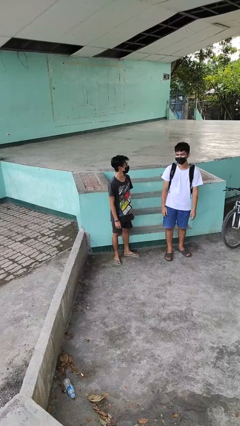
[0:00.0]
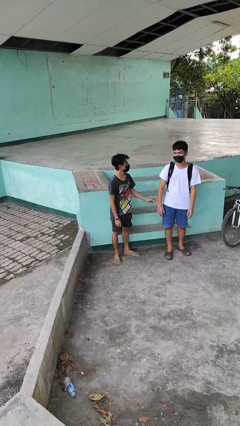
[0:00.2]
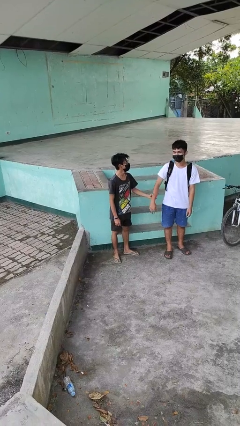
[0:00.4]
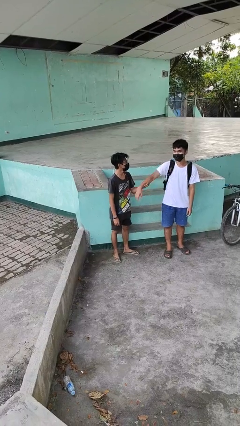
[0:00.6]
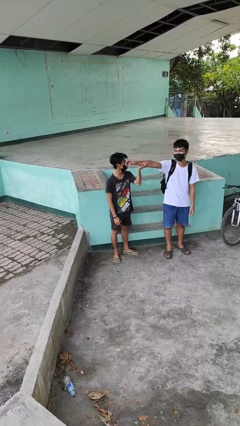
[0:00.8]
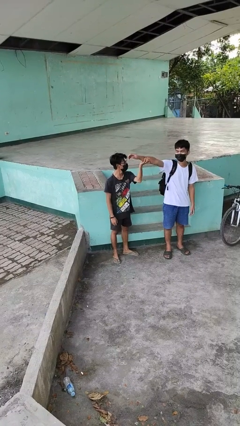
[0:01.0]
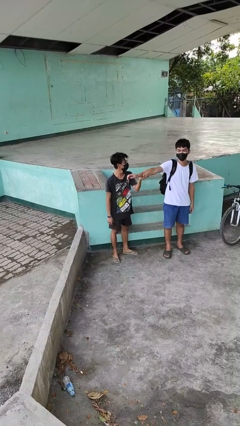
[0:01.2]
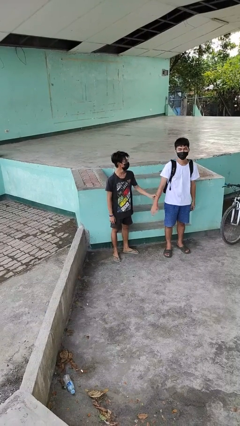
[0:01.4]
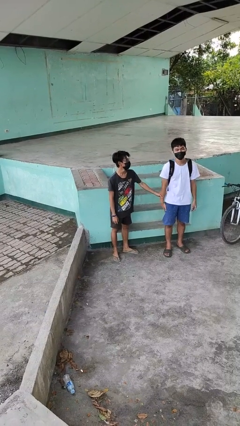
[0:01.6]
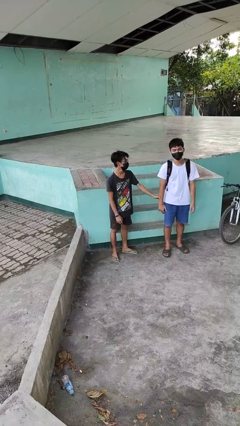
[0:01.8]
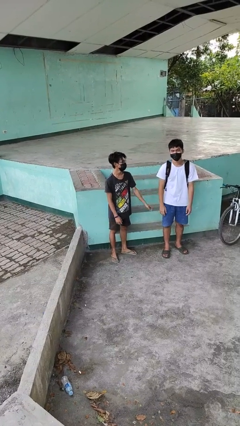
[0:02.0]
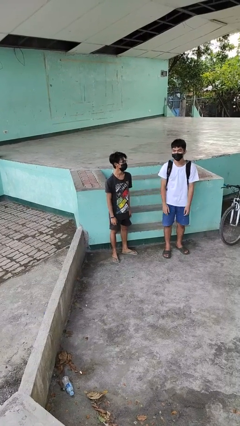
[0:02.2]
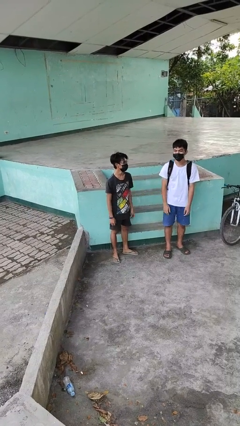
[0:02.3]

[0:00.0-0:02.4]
person grabs person by forearm

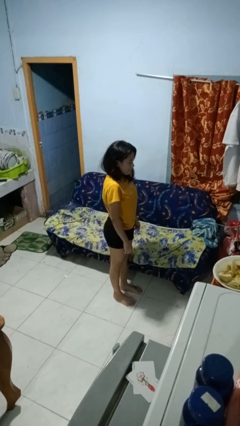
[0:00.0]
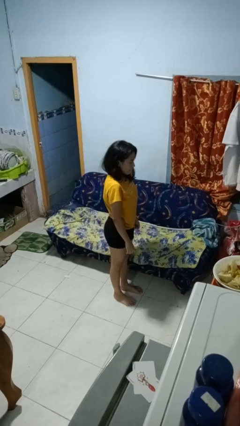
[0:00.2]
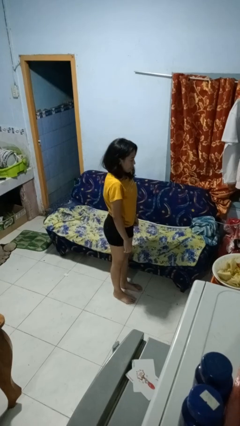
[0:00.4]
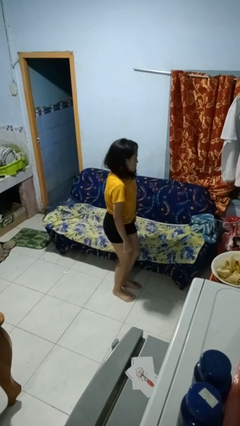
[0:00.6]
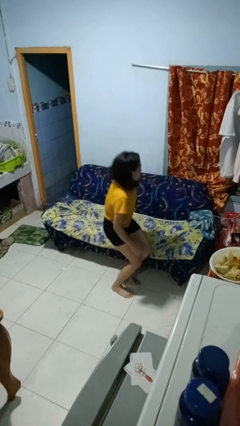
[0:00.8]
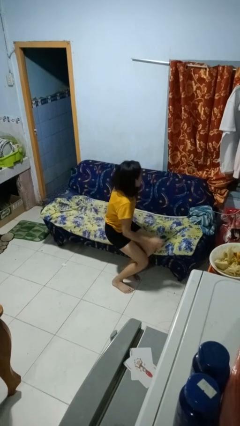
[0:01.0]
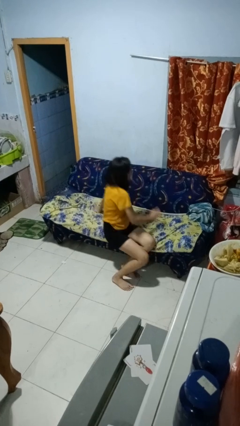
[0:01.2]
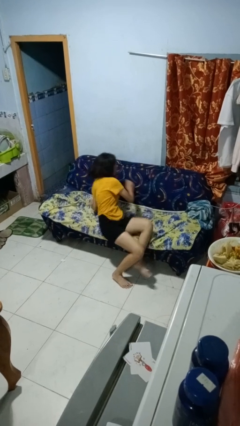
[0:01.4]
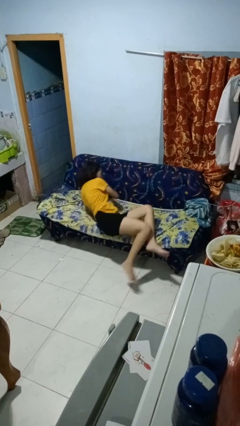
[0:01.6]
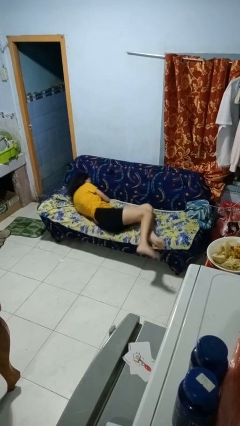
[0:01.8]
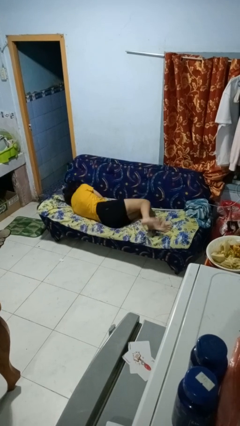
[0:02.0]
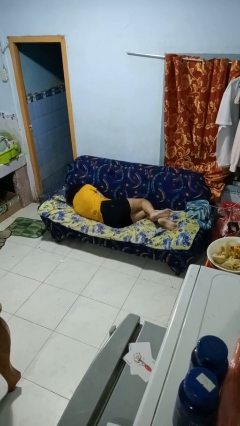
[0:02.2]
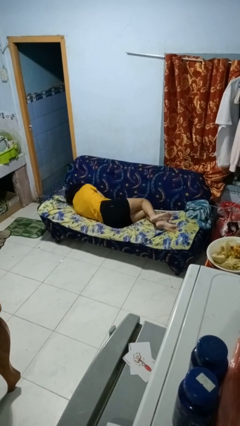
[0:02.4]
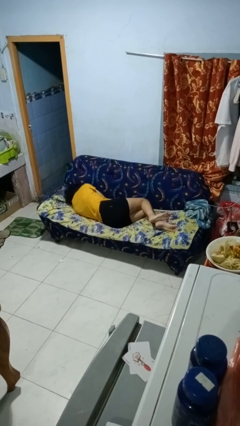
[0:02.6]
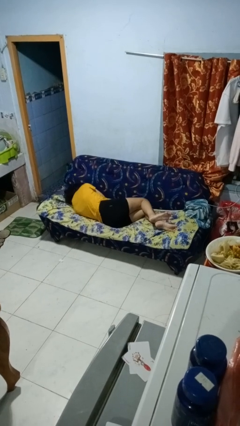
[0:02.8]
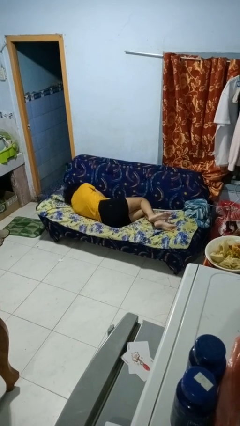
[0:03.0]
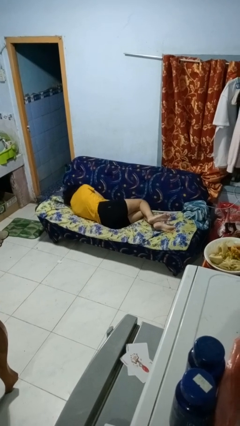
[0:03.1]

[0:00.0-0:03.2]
person lies down on couch

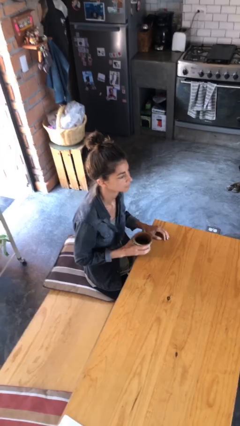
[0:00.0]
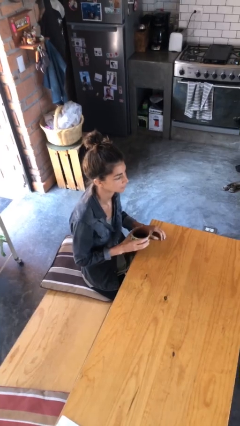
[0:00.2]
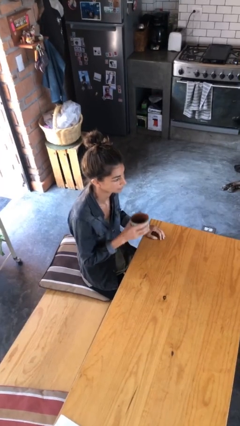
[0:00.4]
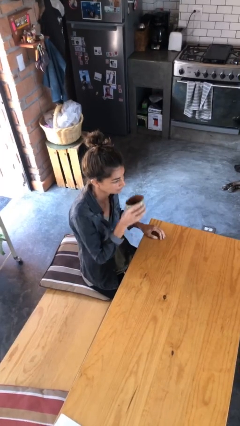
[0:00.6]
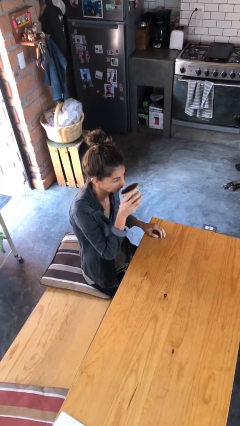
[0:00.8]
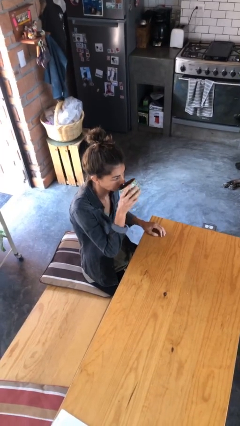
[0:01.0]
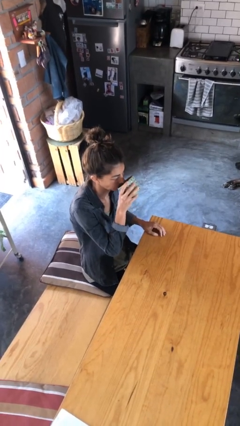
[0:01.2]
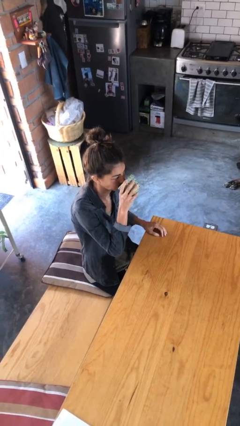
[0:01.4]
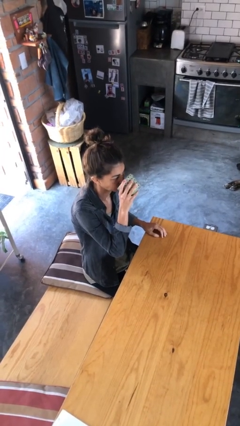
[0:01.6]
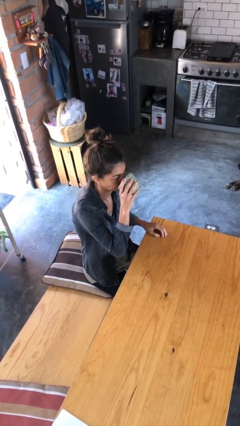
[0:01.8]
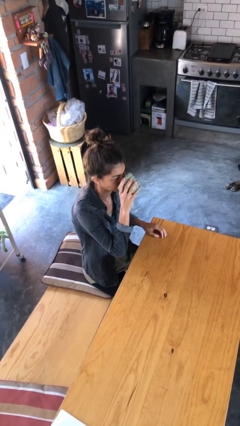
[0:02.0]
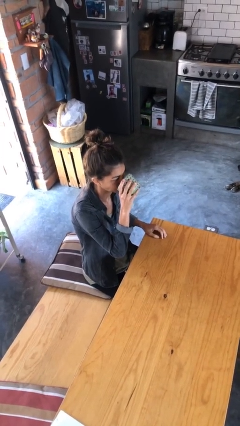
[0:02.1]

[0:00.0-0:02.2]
person drinks from mug

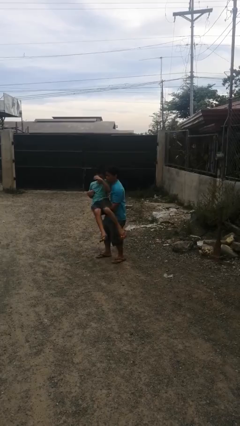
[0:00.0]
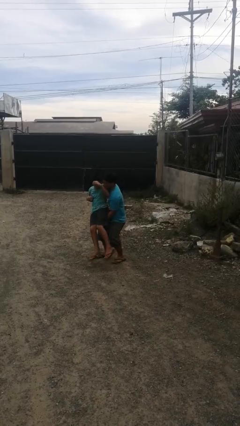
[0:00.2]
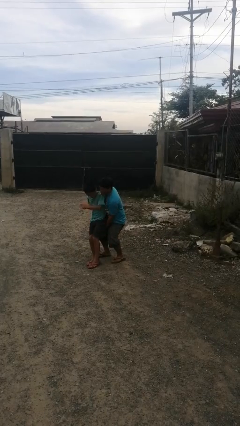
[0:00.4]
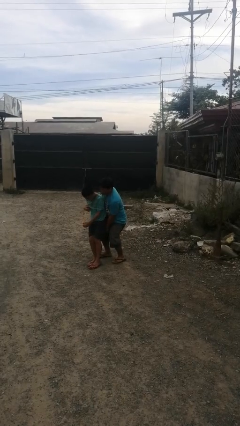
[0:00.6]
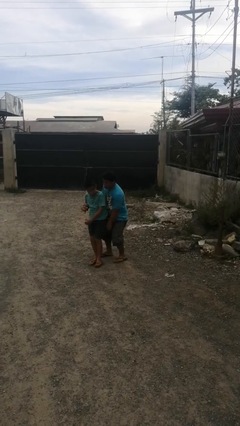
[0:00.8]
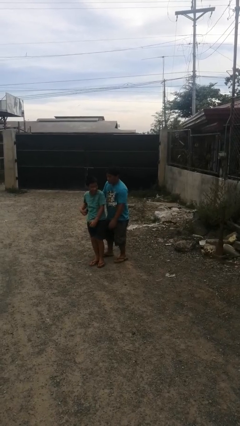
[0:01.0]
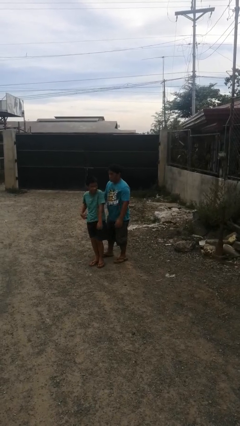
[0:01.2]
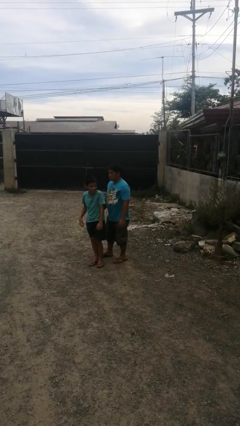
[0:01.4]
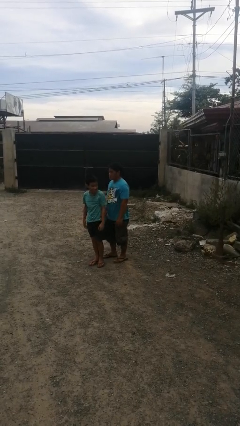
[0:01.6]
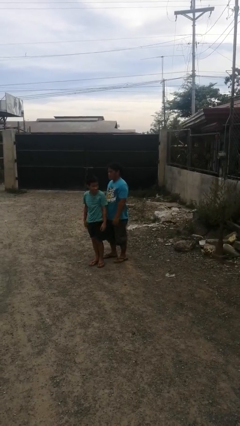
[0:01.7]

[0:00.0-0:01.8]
person puts down person

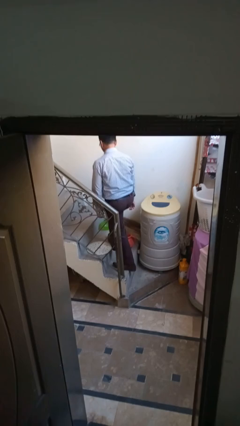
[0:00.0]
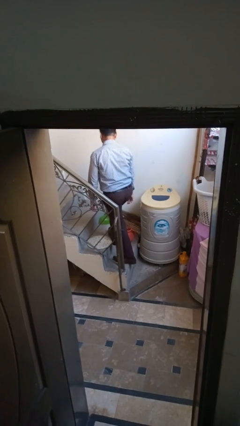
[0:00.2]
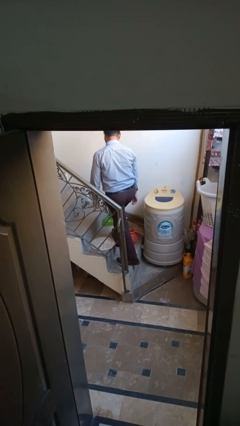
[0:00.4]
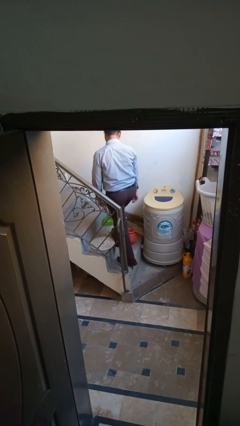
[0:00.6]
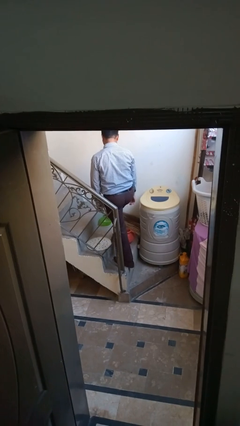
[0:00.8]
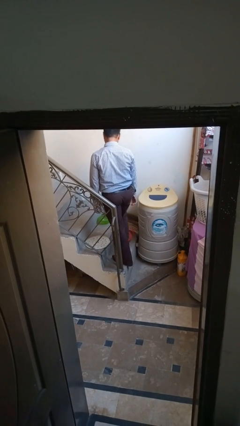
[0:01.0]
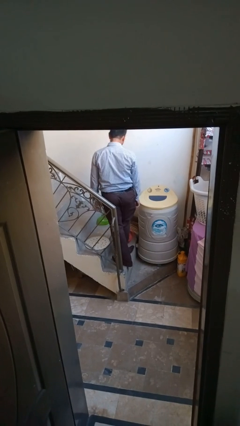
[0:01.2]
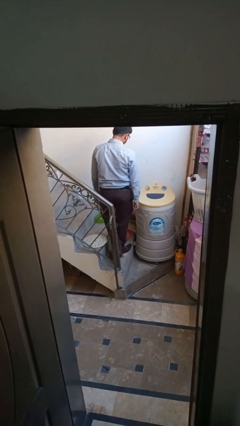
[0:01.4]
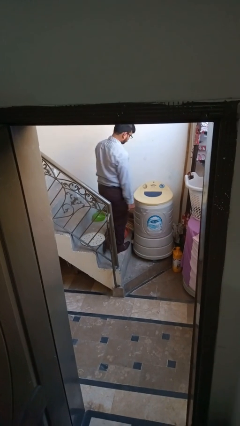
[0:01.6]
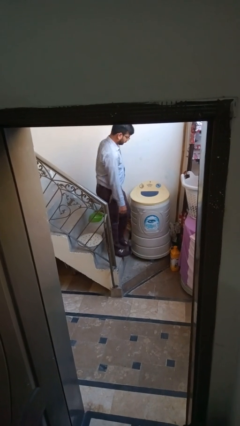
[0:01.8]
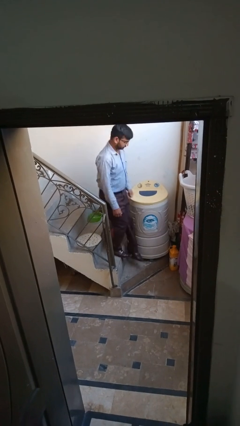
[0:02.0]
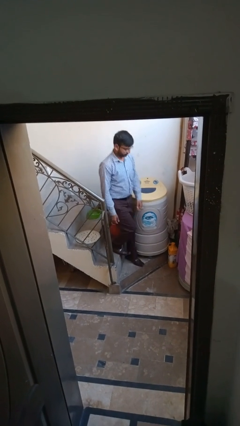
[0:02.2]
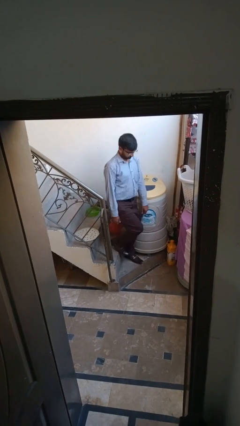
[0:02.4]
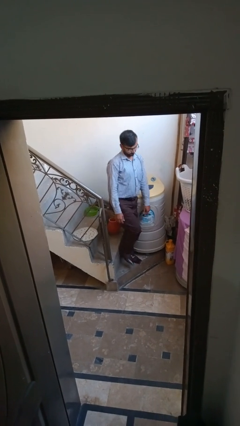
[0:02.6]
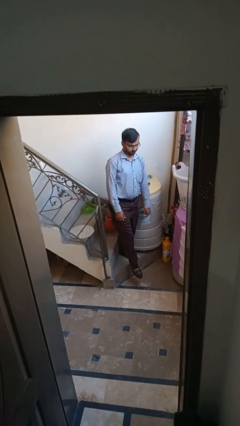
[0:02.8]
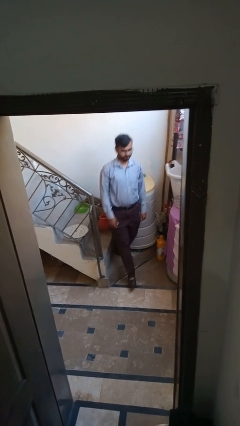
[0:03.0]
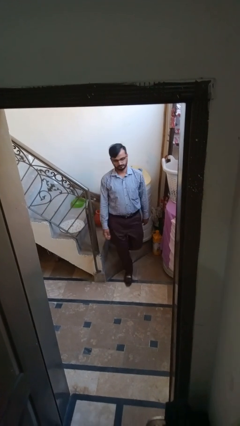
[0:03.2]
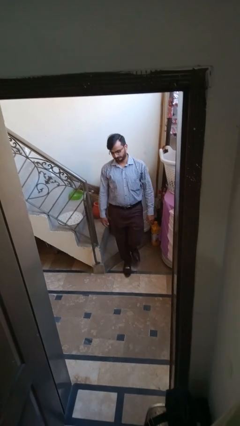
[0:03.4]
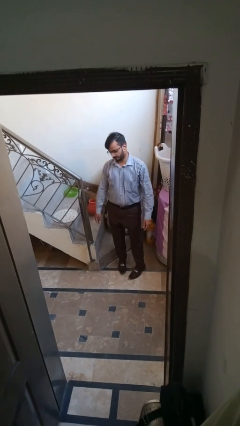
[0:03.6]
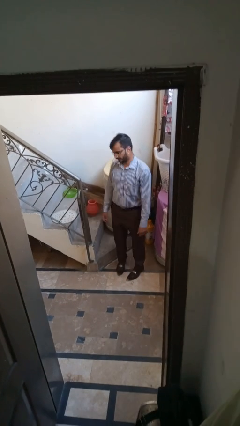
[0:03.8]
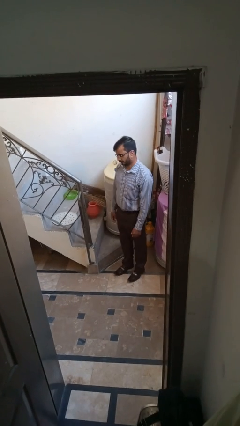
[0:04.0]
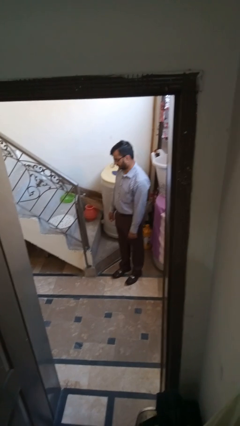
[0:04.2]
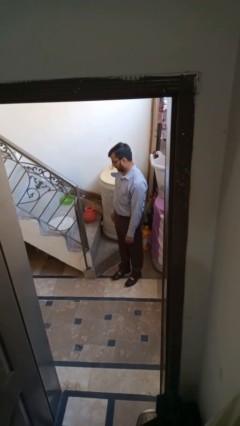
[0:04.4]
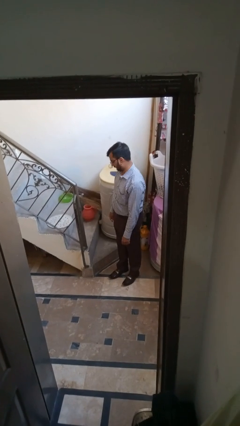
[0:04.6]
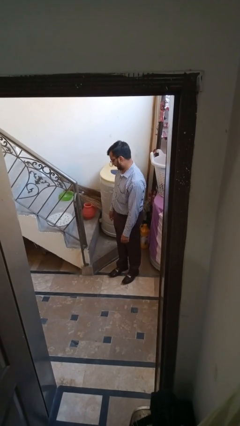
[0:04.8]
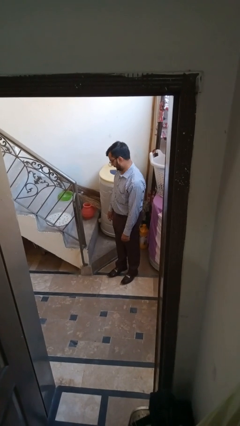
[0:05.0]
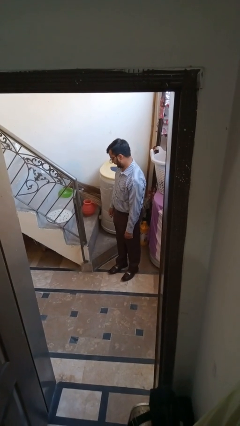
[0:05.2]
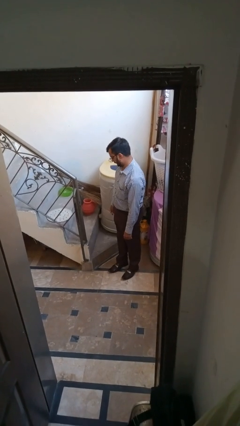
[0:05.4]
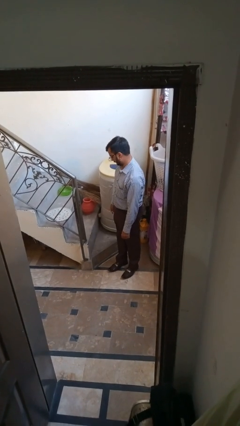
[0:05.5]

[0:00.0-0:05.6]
person climbs down stairs

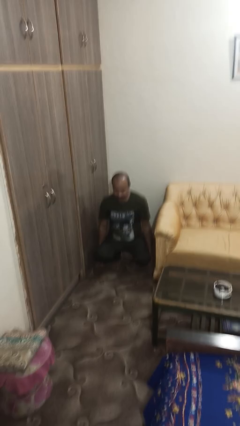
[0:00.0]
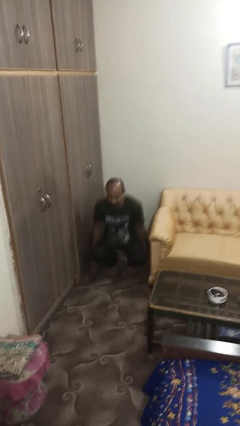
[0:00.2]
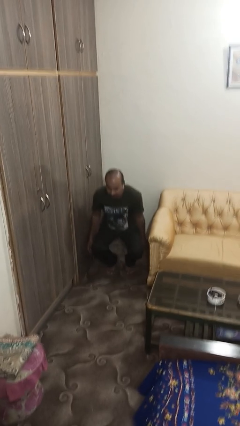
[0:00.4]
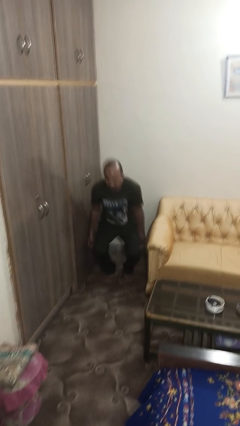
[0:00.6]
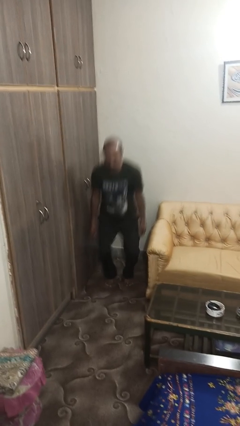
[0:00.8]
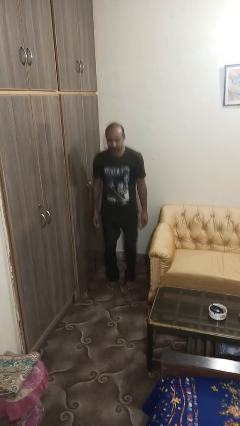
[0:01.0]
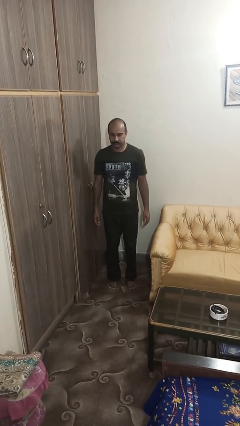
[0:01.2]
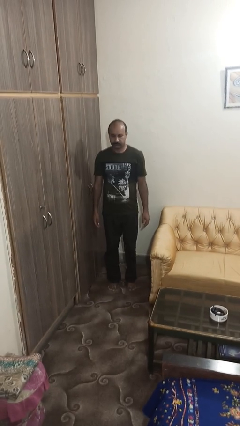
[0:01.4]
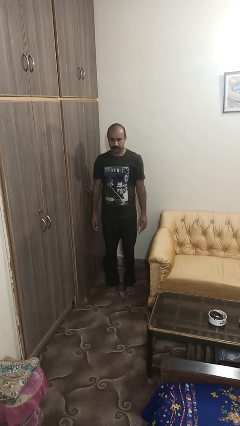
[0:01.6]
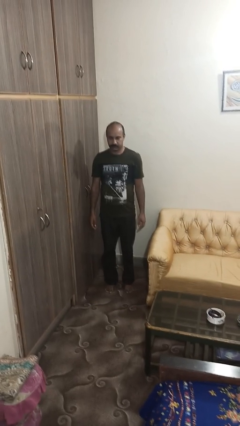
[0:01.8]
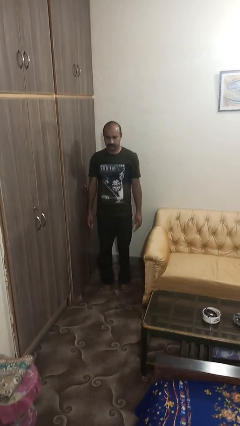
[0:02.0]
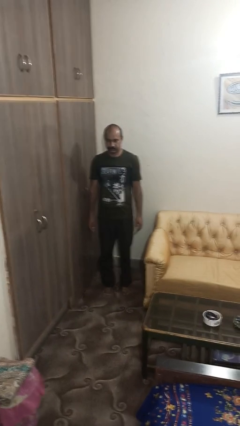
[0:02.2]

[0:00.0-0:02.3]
person stands up
